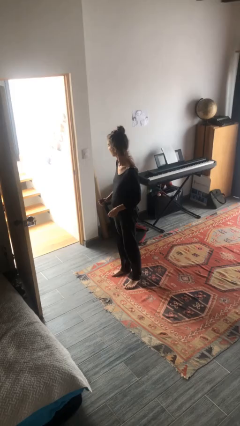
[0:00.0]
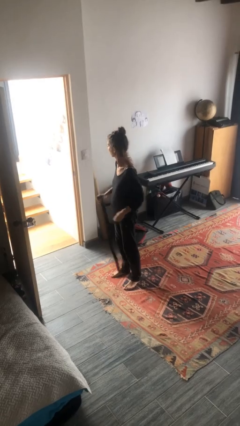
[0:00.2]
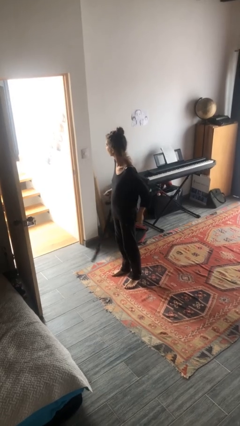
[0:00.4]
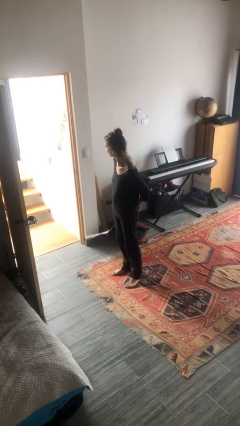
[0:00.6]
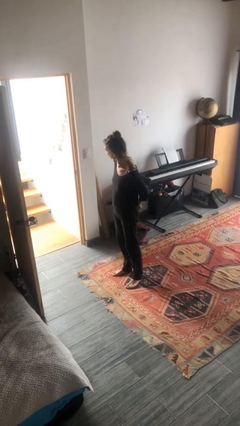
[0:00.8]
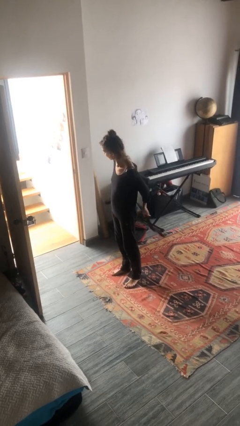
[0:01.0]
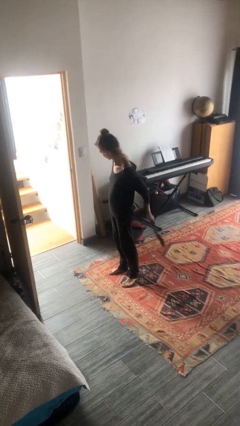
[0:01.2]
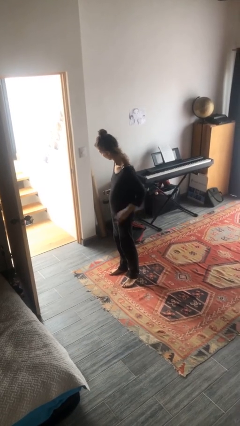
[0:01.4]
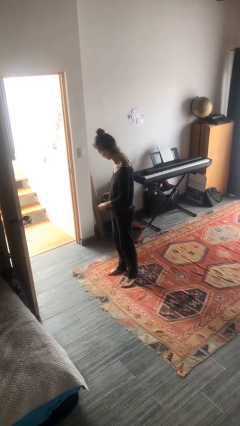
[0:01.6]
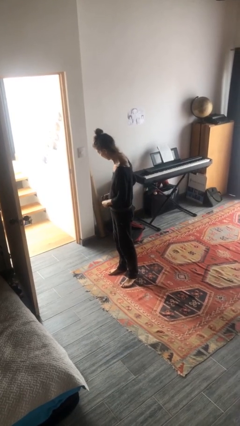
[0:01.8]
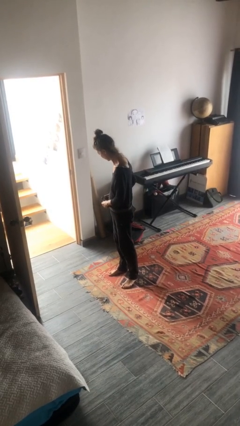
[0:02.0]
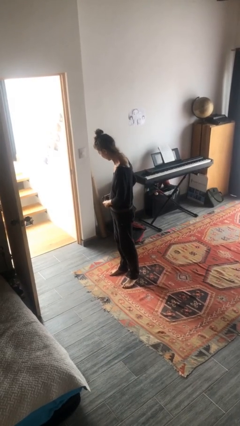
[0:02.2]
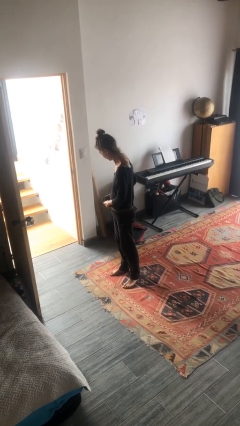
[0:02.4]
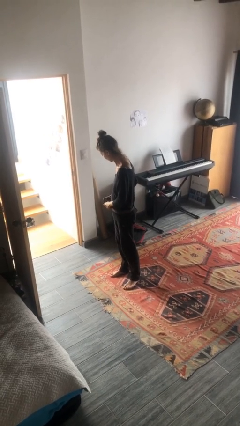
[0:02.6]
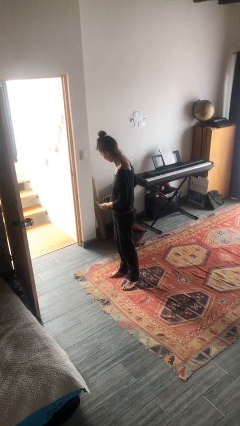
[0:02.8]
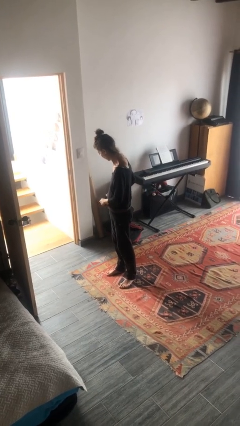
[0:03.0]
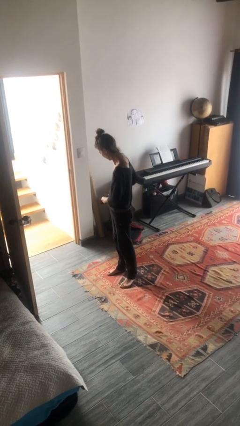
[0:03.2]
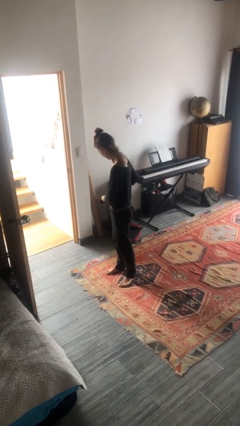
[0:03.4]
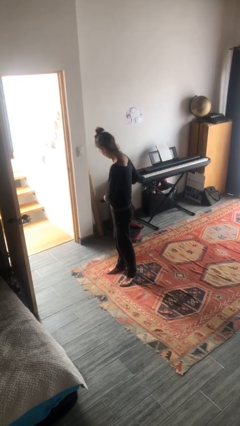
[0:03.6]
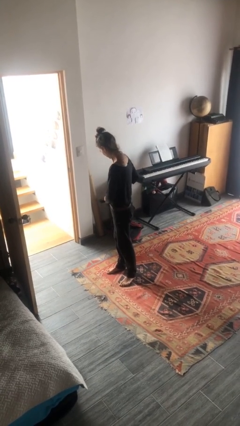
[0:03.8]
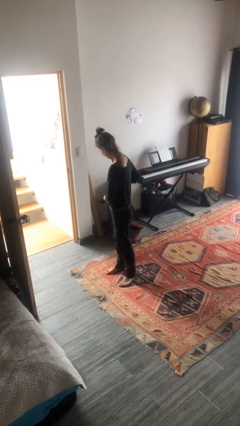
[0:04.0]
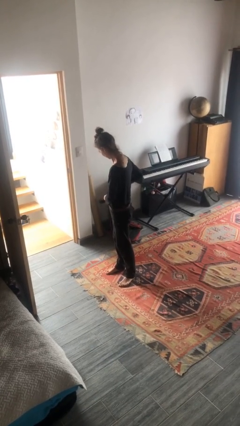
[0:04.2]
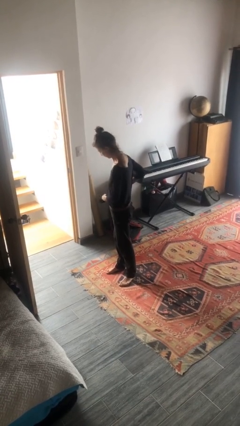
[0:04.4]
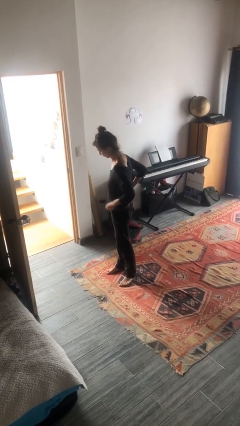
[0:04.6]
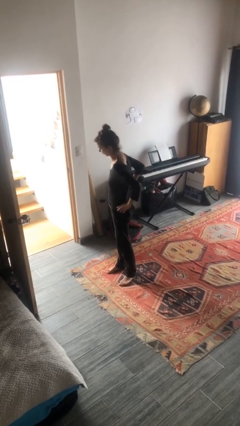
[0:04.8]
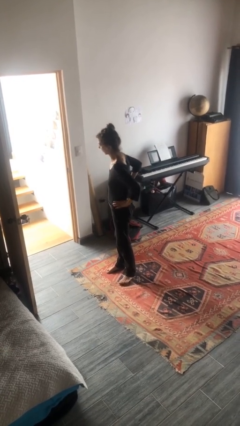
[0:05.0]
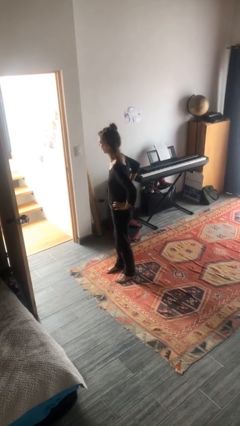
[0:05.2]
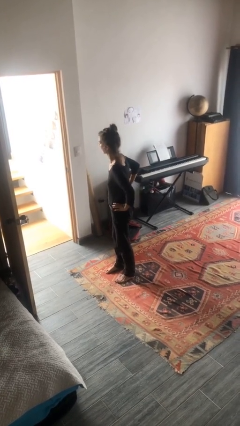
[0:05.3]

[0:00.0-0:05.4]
person puts on belt

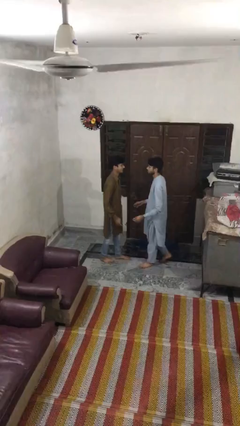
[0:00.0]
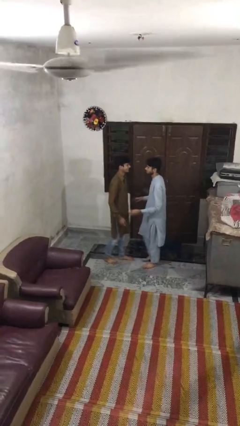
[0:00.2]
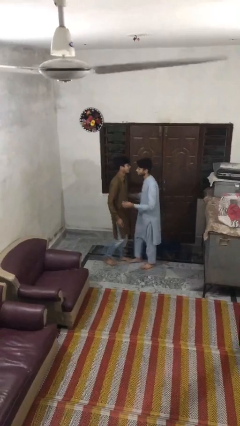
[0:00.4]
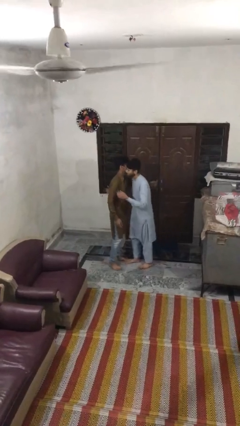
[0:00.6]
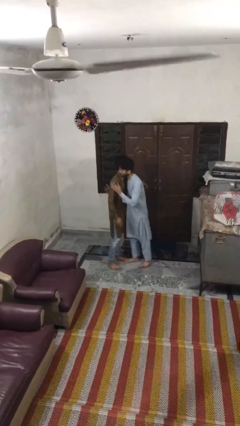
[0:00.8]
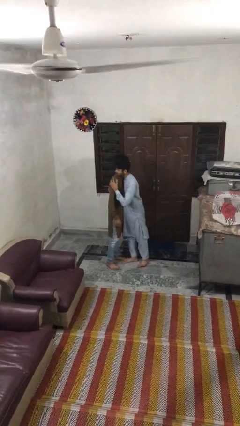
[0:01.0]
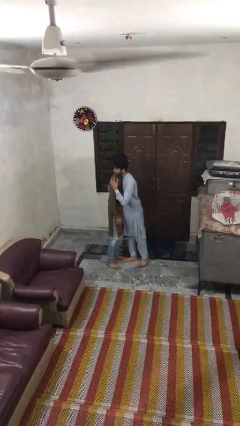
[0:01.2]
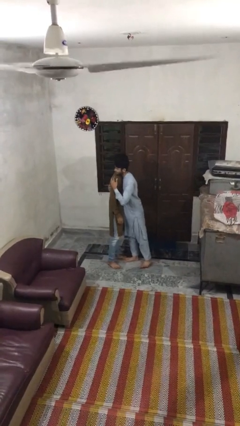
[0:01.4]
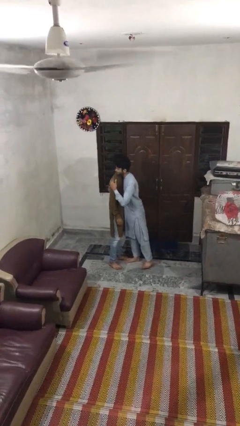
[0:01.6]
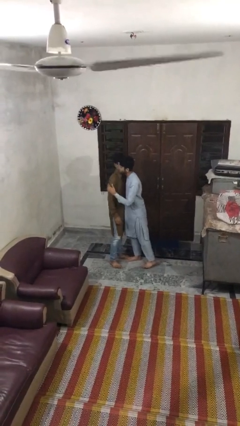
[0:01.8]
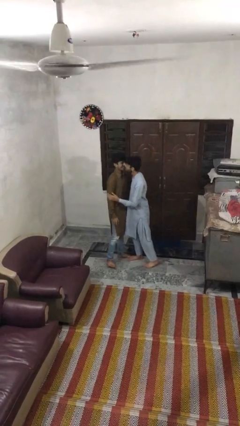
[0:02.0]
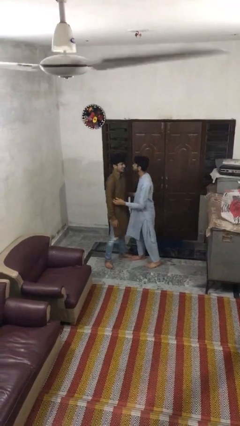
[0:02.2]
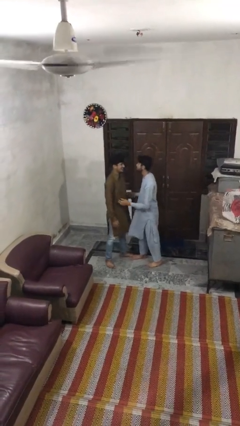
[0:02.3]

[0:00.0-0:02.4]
person embraces person

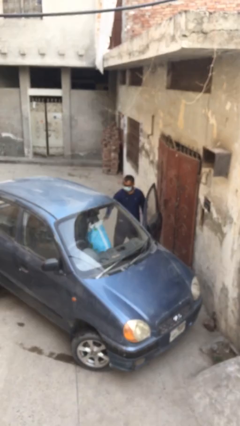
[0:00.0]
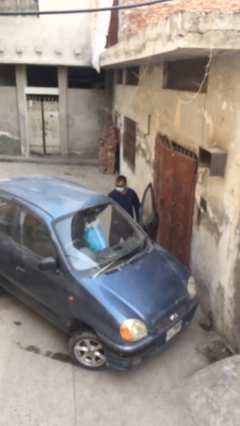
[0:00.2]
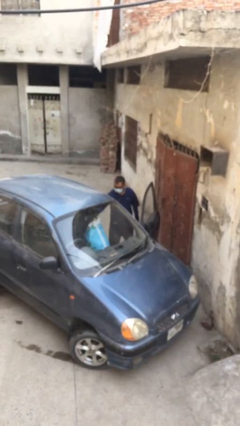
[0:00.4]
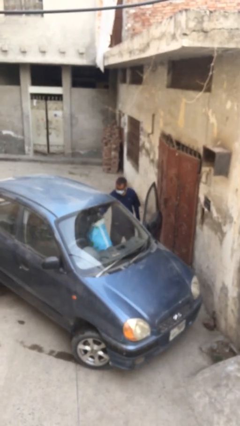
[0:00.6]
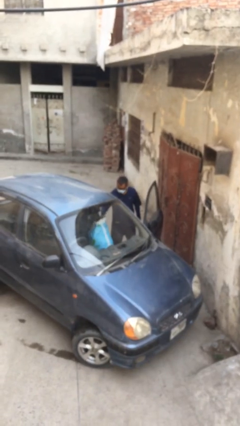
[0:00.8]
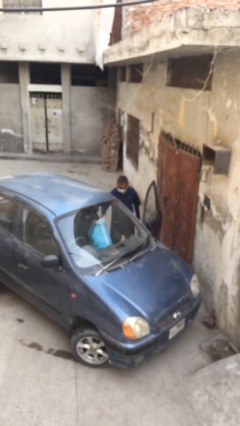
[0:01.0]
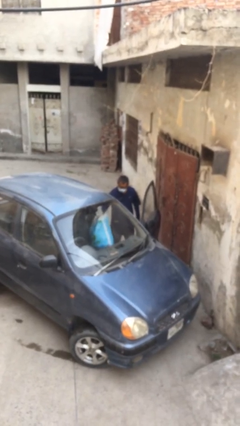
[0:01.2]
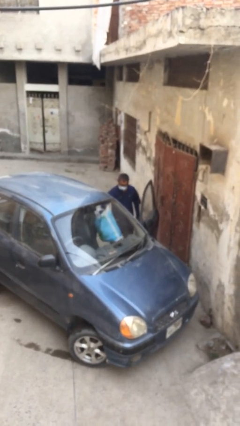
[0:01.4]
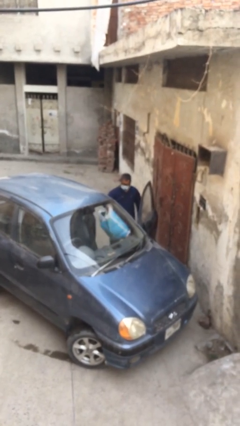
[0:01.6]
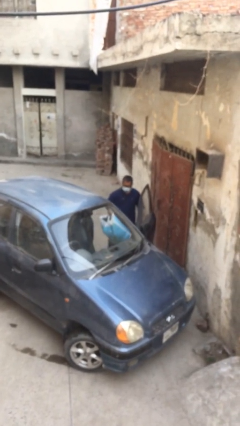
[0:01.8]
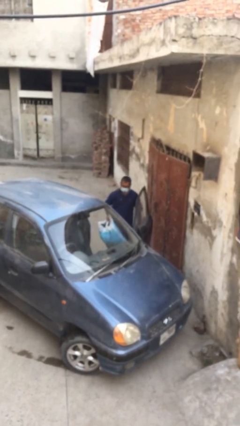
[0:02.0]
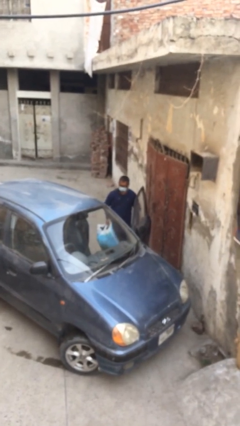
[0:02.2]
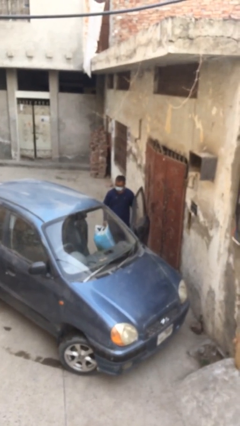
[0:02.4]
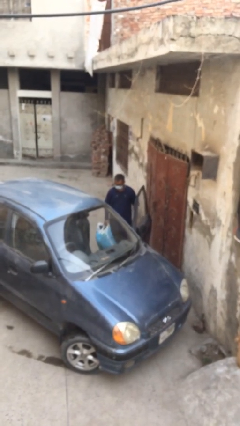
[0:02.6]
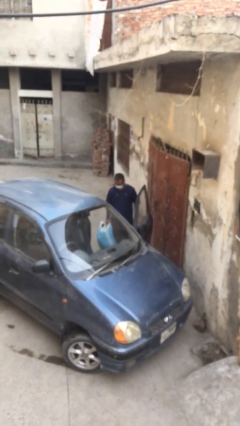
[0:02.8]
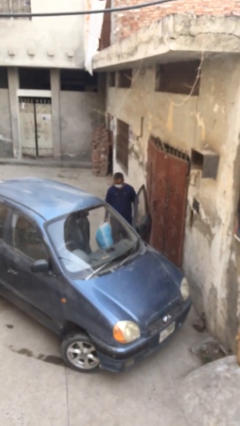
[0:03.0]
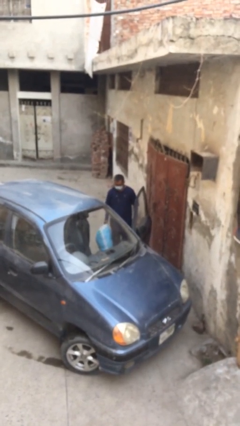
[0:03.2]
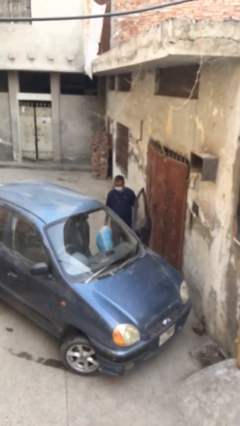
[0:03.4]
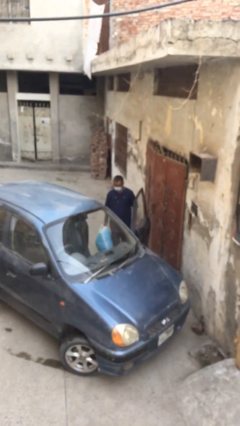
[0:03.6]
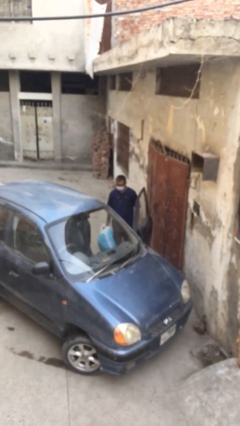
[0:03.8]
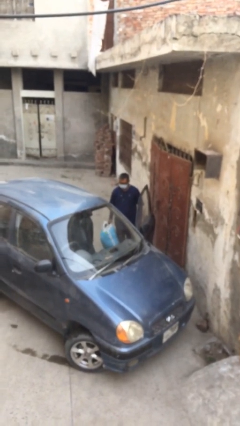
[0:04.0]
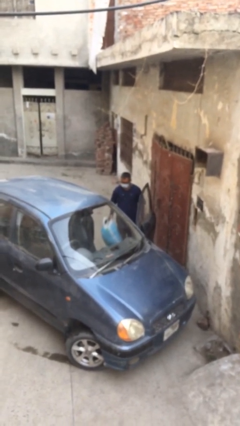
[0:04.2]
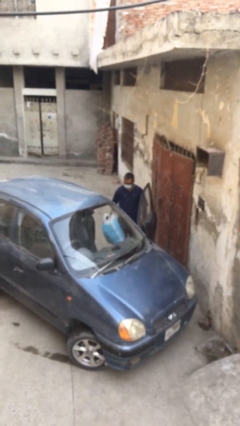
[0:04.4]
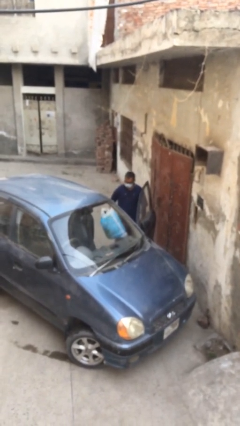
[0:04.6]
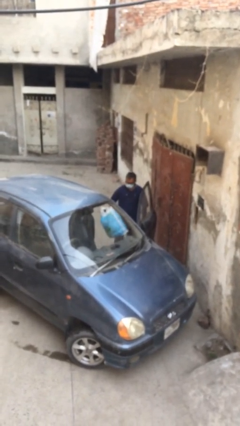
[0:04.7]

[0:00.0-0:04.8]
person unloads car

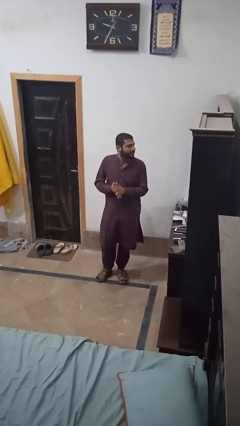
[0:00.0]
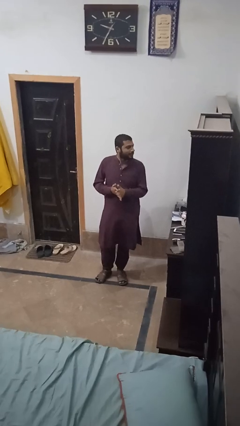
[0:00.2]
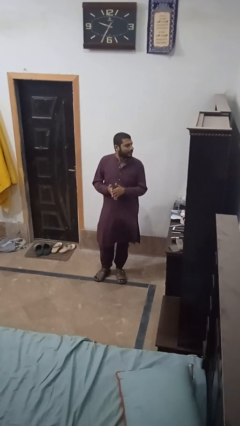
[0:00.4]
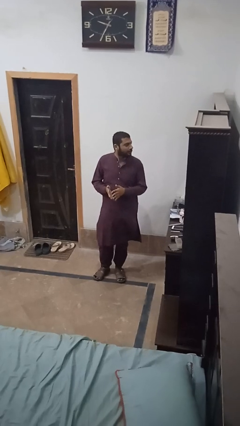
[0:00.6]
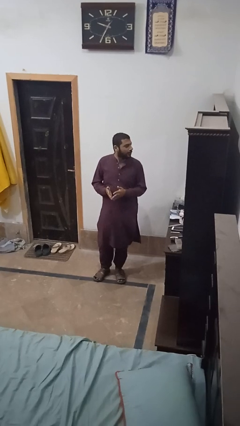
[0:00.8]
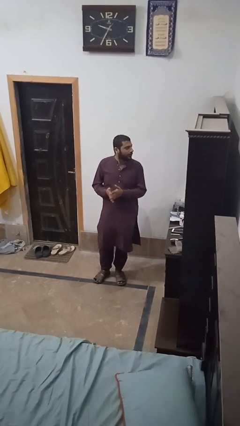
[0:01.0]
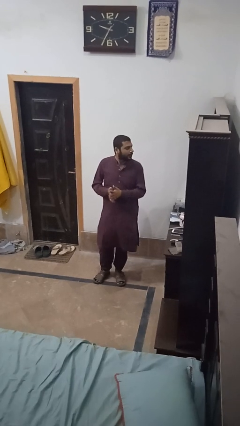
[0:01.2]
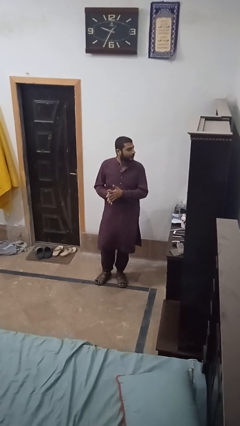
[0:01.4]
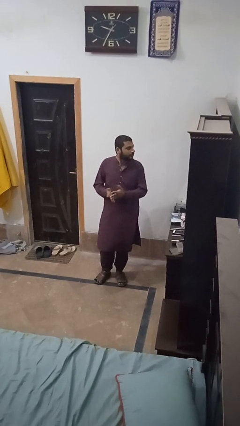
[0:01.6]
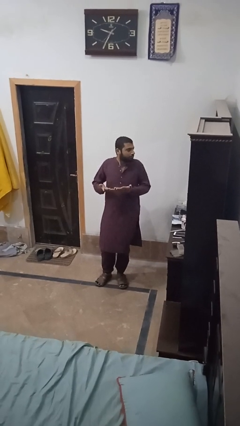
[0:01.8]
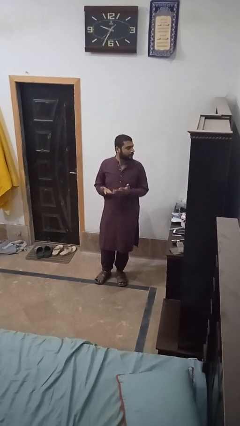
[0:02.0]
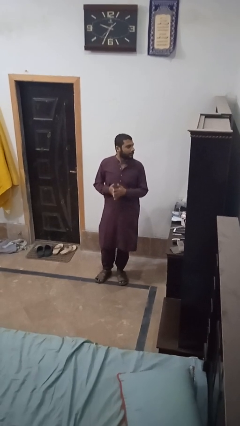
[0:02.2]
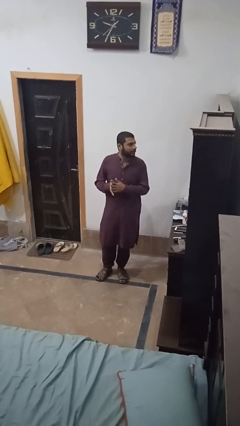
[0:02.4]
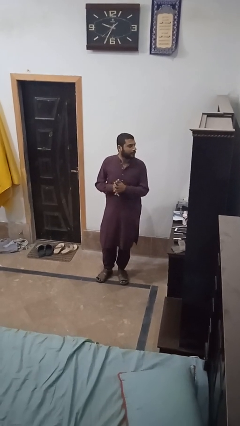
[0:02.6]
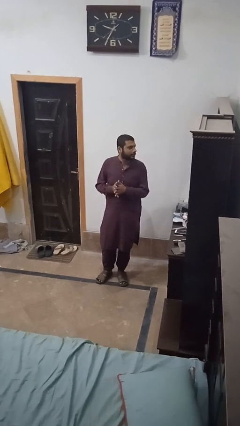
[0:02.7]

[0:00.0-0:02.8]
person shrugs

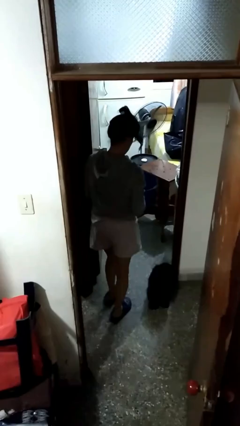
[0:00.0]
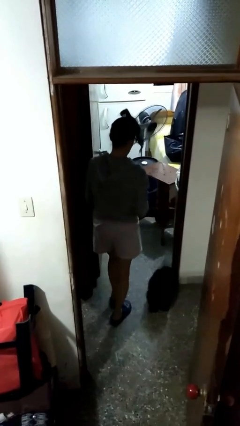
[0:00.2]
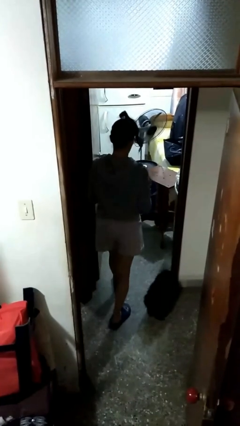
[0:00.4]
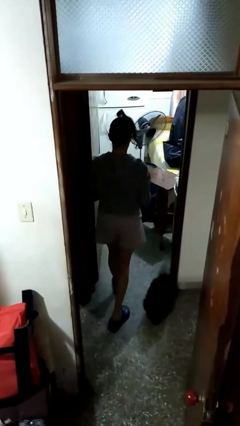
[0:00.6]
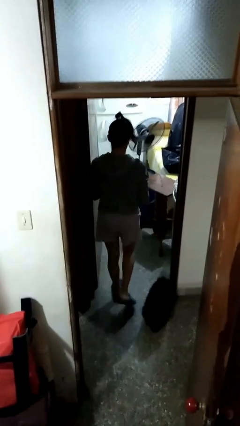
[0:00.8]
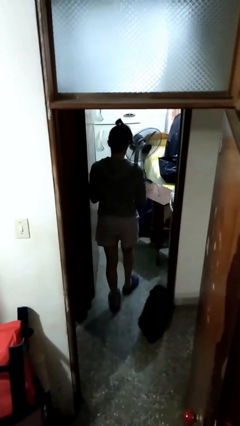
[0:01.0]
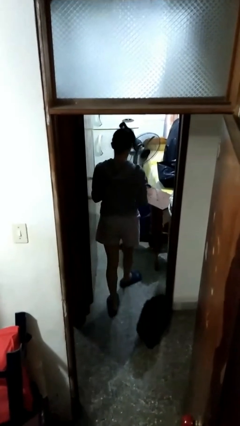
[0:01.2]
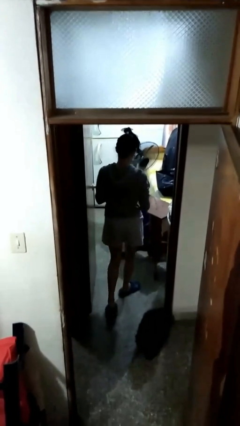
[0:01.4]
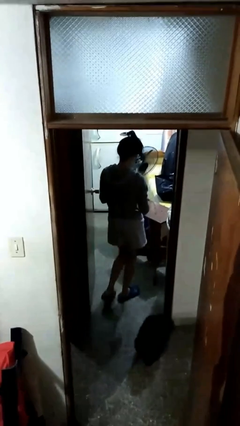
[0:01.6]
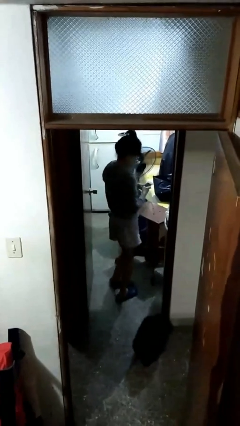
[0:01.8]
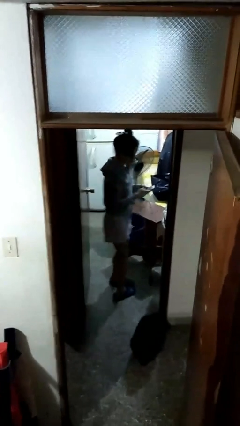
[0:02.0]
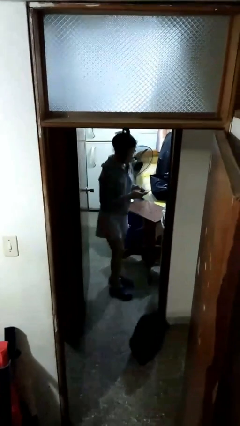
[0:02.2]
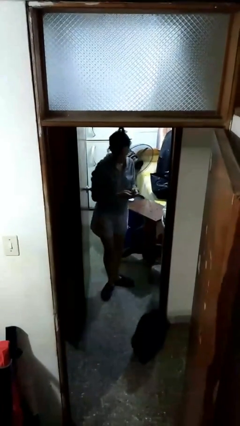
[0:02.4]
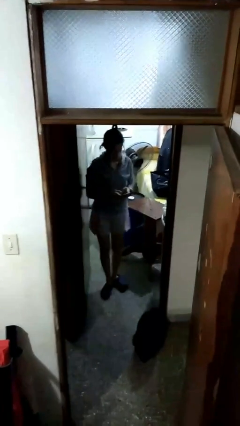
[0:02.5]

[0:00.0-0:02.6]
person exits scene through structure
